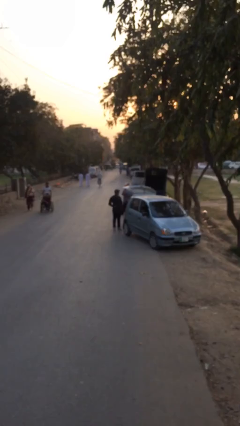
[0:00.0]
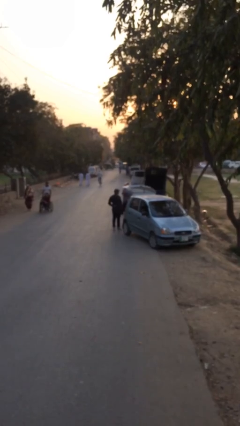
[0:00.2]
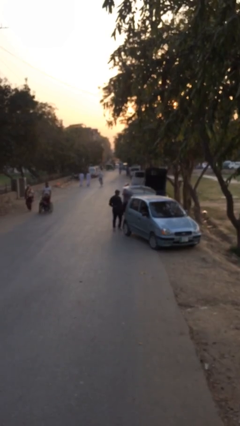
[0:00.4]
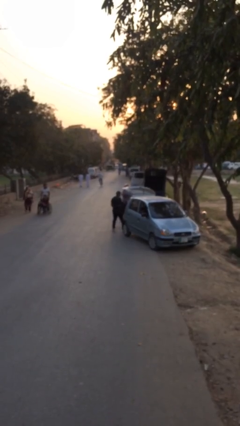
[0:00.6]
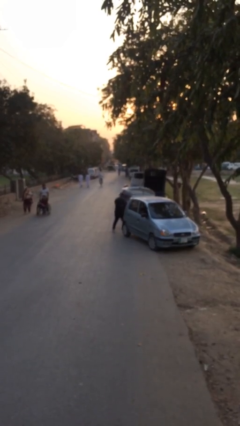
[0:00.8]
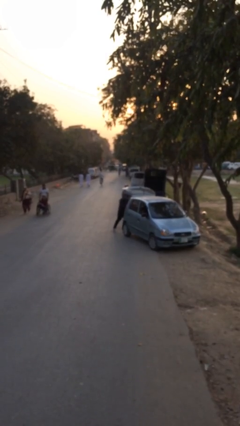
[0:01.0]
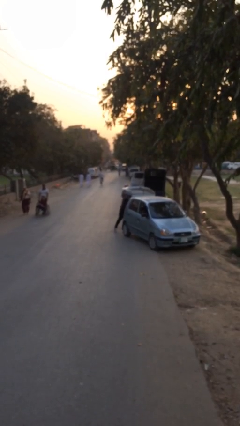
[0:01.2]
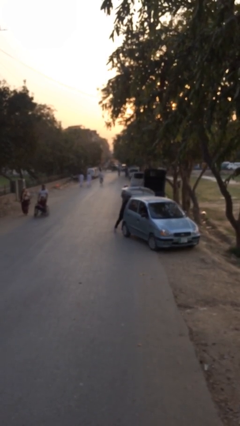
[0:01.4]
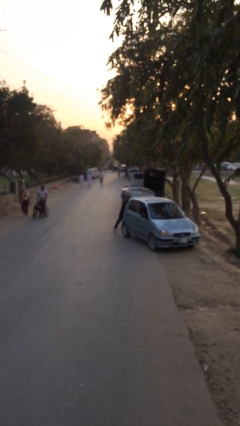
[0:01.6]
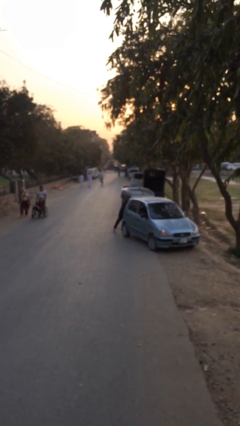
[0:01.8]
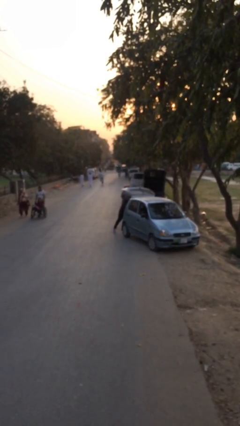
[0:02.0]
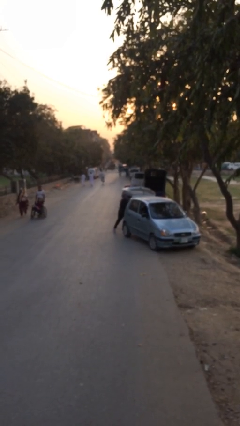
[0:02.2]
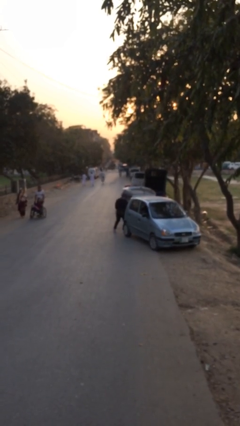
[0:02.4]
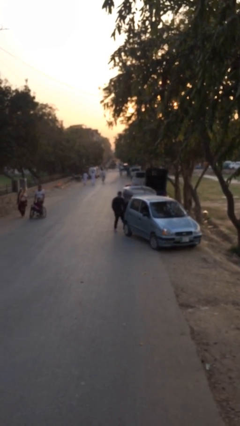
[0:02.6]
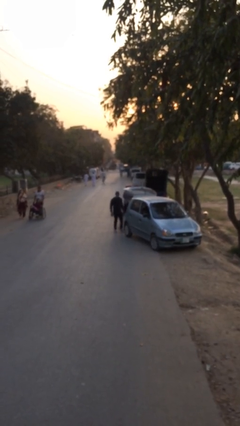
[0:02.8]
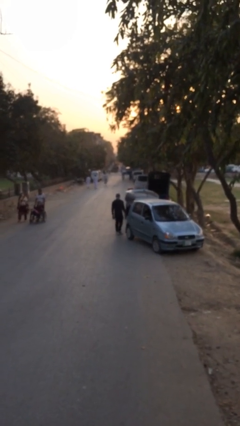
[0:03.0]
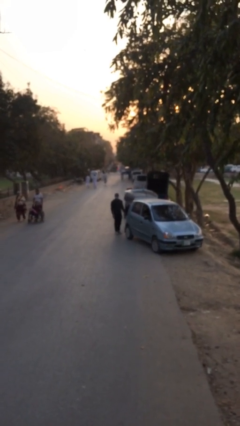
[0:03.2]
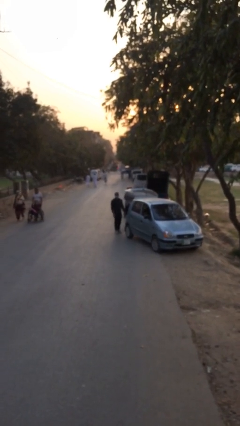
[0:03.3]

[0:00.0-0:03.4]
person loads car

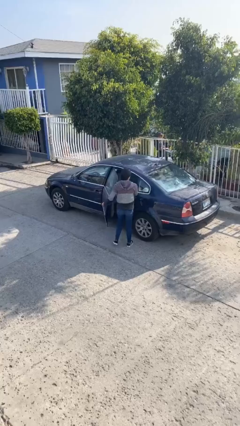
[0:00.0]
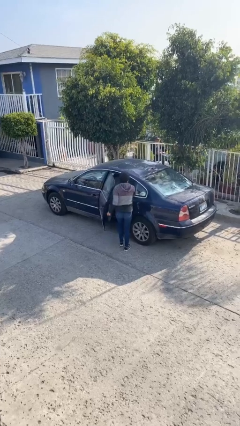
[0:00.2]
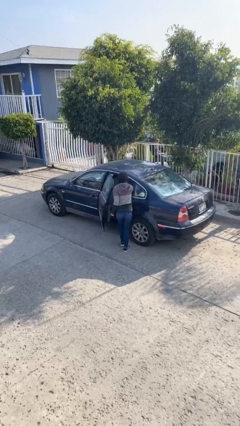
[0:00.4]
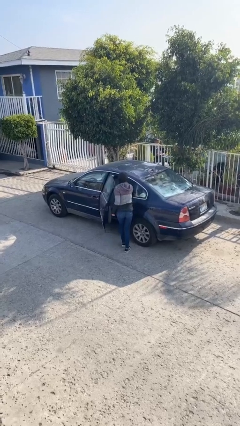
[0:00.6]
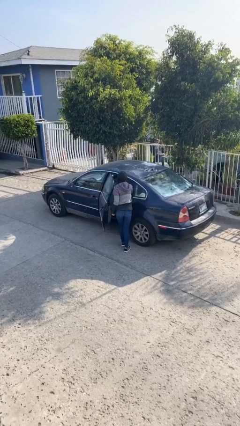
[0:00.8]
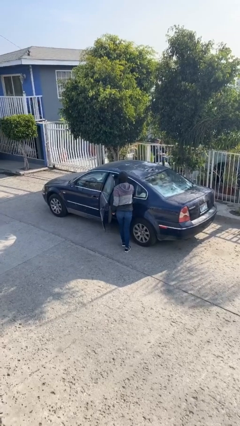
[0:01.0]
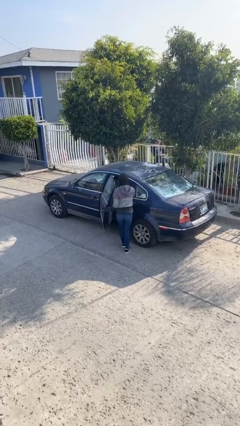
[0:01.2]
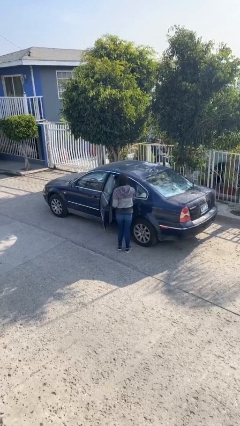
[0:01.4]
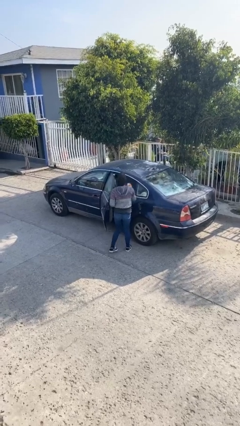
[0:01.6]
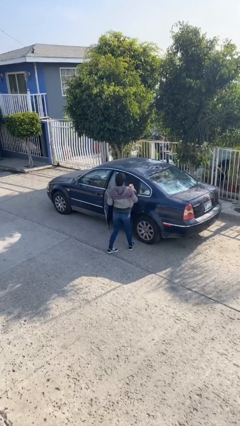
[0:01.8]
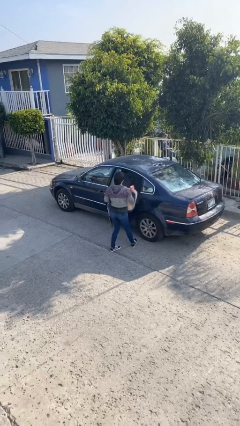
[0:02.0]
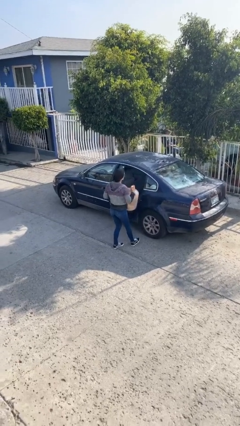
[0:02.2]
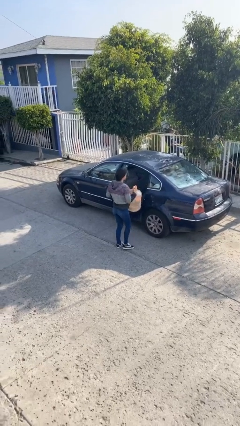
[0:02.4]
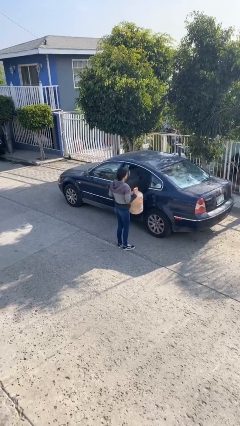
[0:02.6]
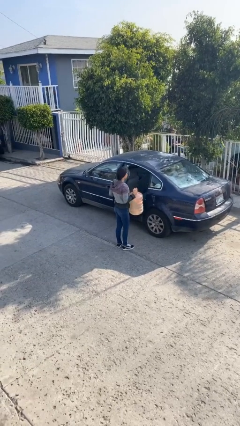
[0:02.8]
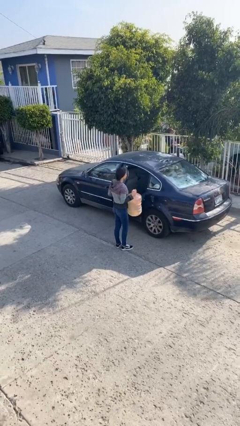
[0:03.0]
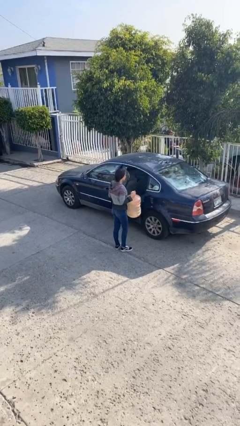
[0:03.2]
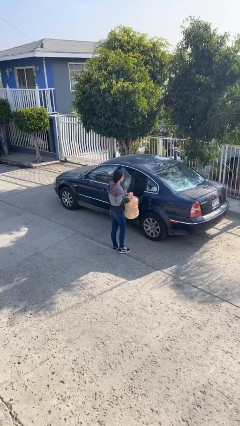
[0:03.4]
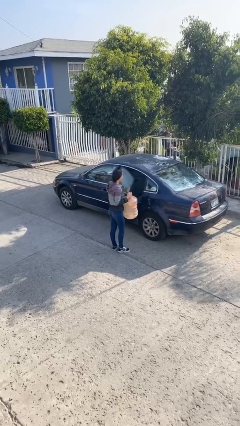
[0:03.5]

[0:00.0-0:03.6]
person unloads car

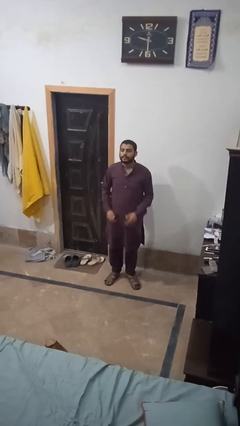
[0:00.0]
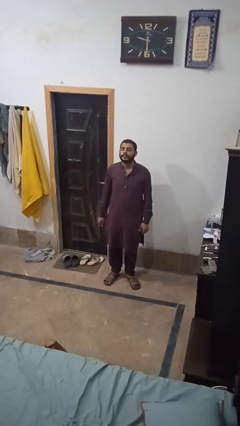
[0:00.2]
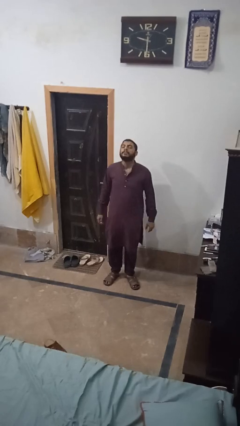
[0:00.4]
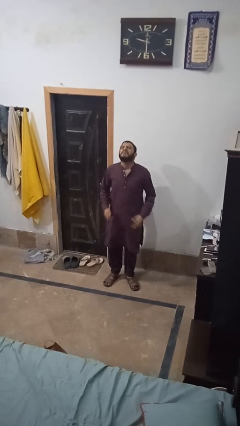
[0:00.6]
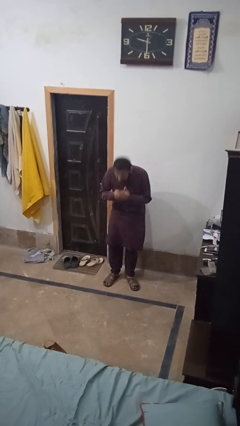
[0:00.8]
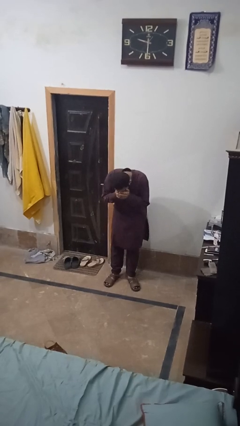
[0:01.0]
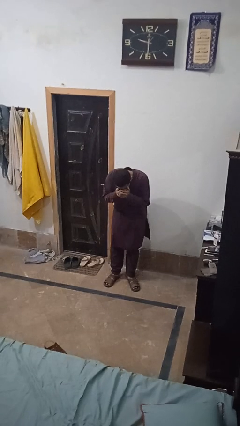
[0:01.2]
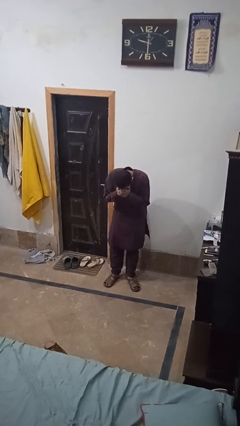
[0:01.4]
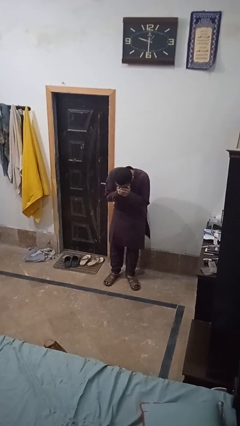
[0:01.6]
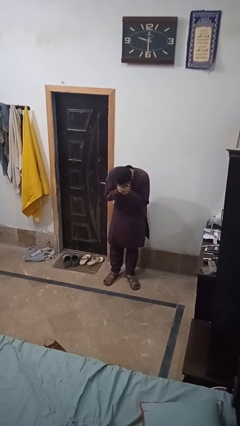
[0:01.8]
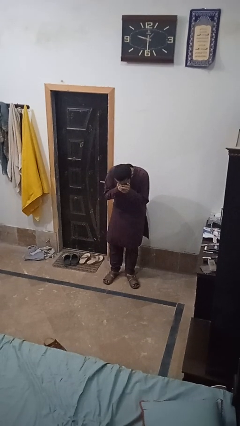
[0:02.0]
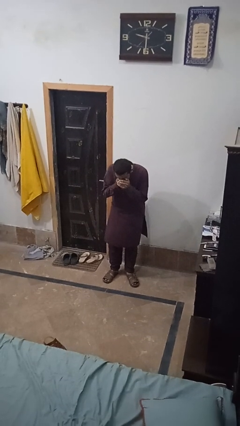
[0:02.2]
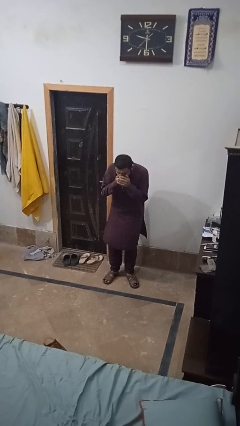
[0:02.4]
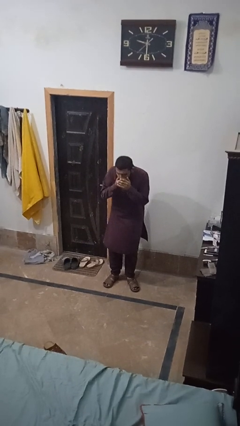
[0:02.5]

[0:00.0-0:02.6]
person sneezes into hand

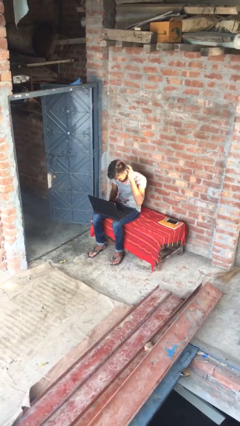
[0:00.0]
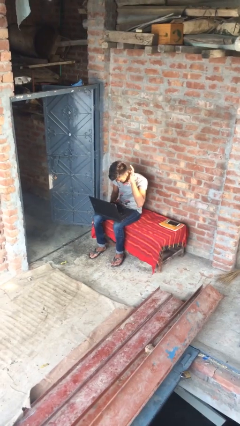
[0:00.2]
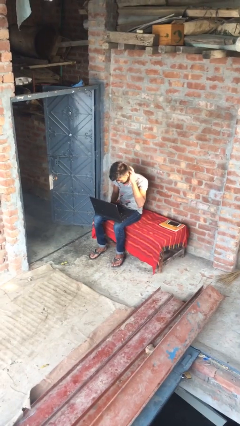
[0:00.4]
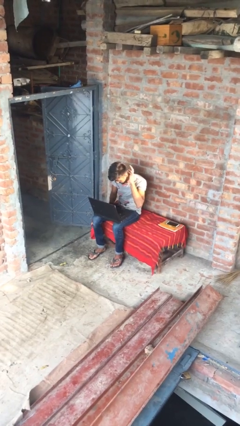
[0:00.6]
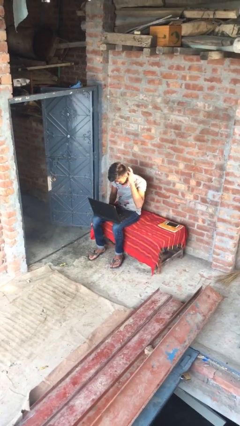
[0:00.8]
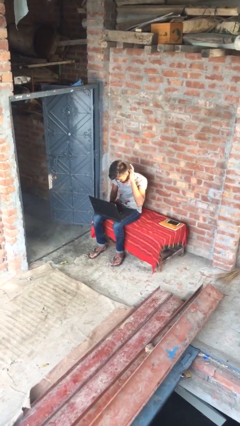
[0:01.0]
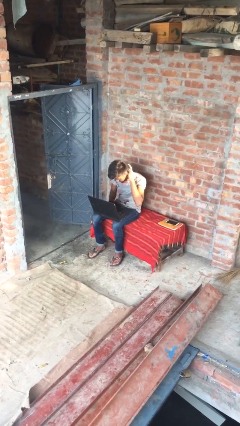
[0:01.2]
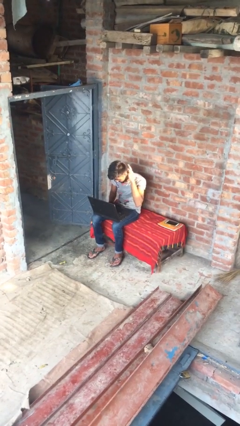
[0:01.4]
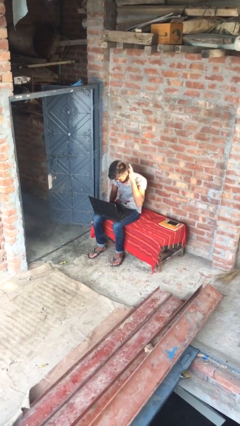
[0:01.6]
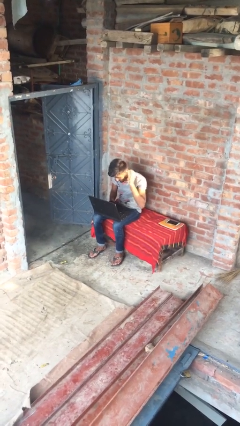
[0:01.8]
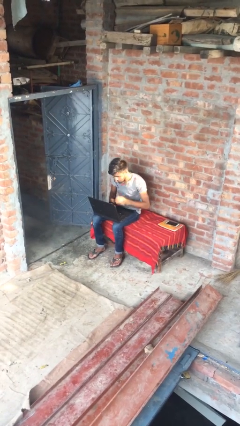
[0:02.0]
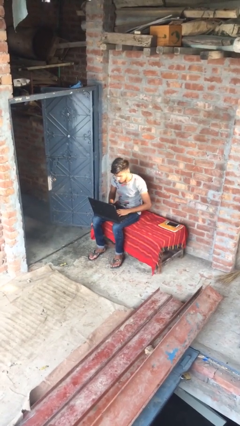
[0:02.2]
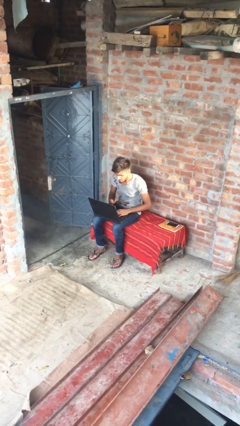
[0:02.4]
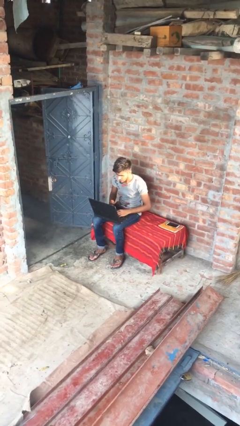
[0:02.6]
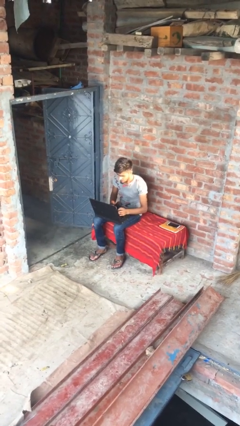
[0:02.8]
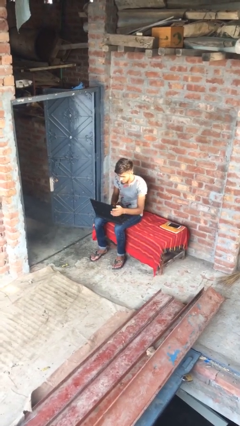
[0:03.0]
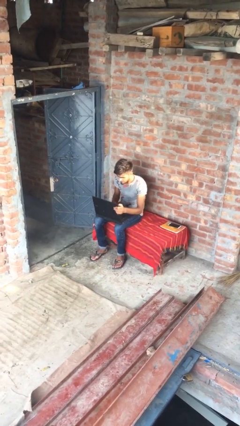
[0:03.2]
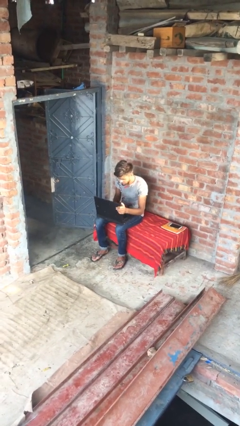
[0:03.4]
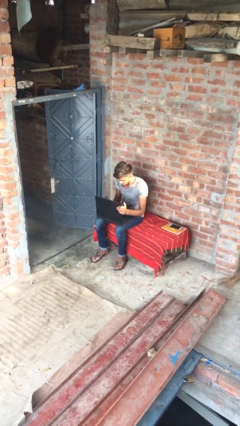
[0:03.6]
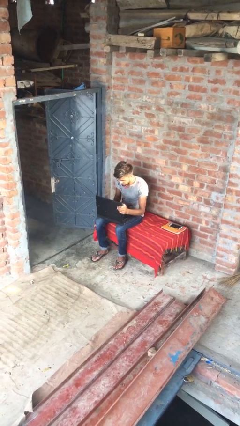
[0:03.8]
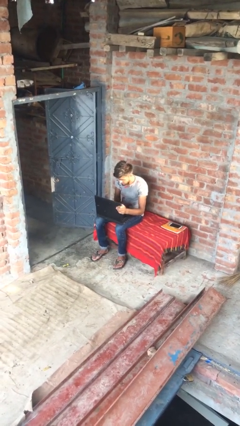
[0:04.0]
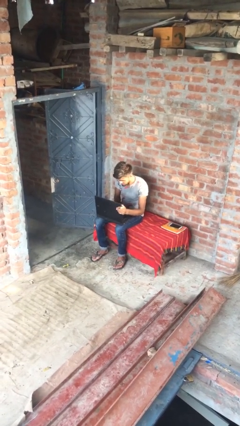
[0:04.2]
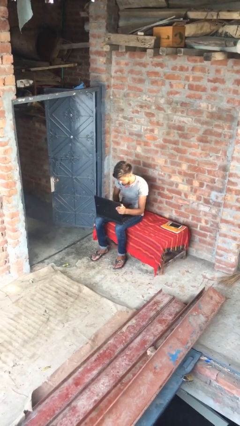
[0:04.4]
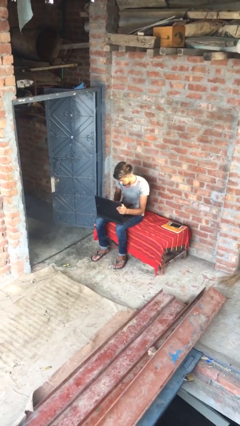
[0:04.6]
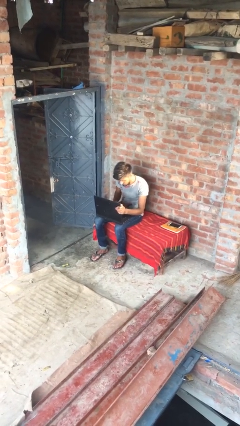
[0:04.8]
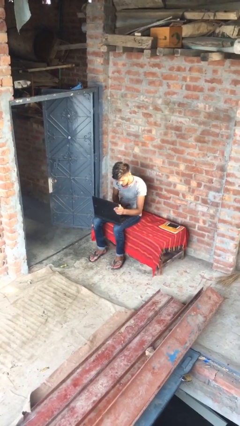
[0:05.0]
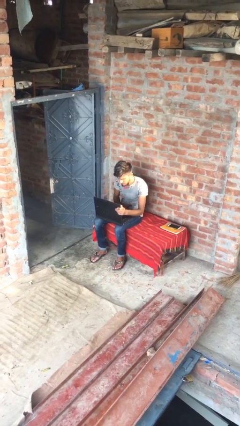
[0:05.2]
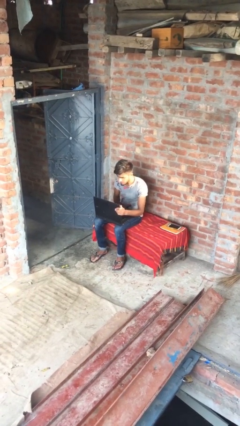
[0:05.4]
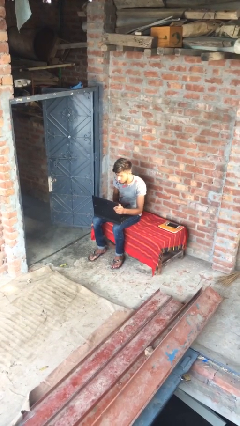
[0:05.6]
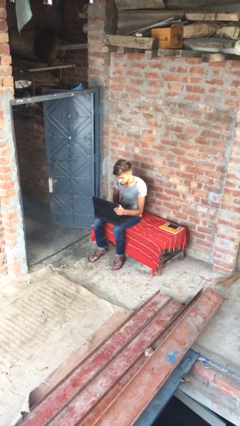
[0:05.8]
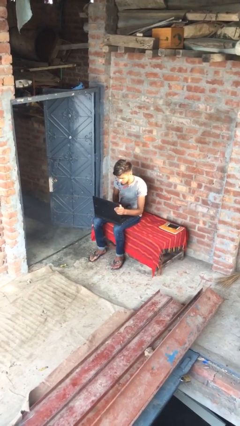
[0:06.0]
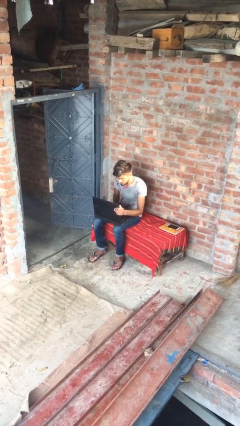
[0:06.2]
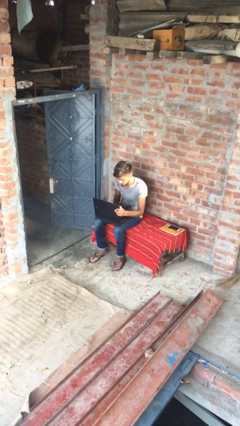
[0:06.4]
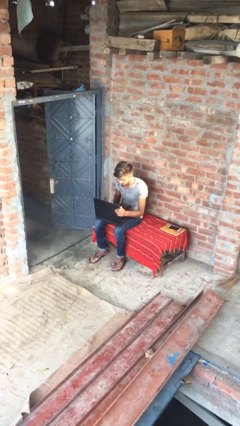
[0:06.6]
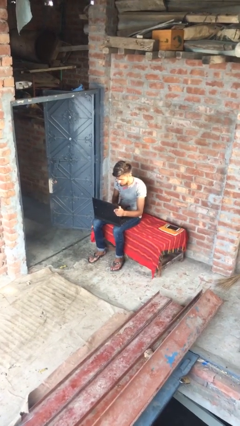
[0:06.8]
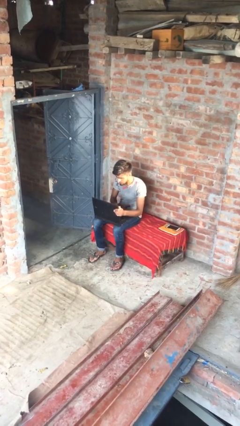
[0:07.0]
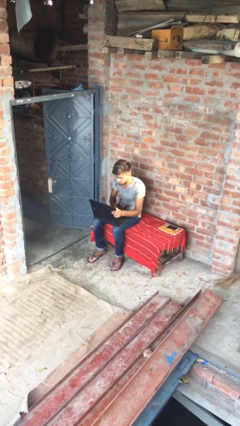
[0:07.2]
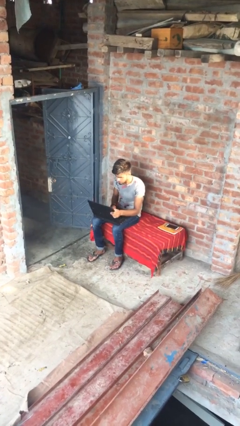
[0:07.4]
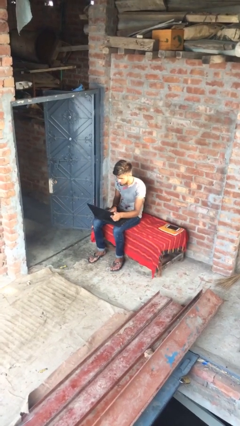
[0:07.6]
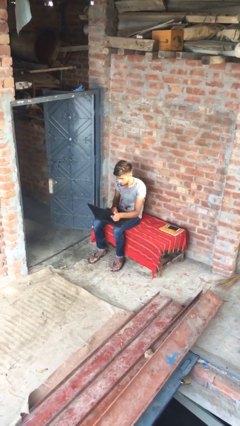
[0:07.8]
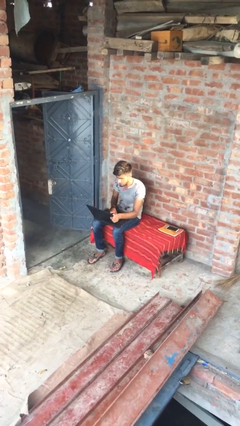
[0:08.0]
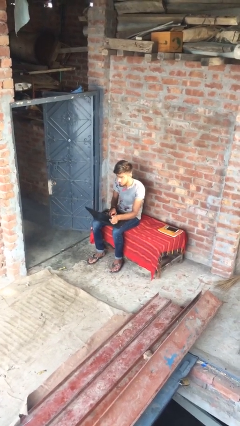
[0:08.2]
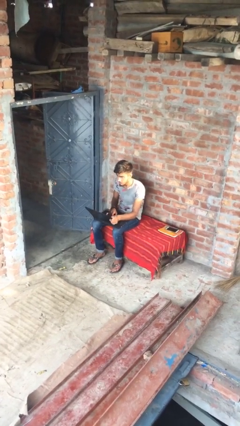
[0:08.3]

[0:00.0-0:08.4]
person interacts with laptop
